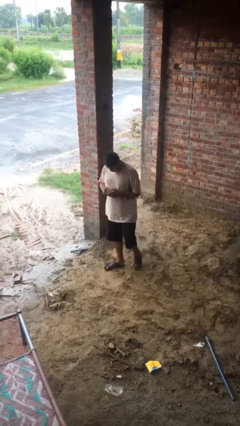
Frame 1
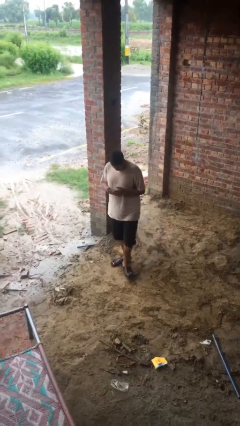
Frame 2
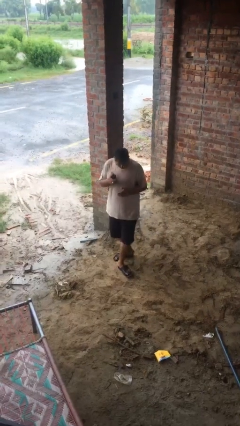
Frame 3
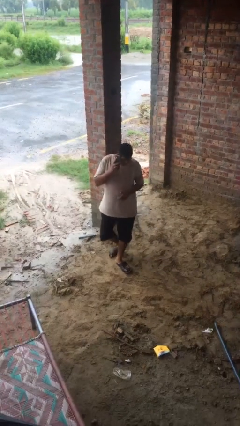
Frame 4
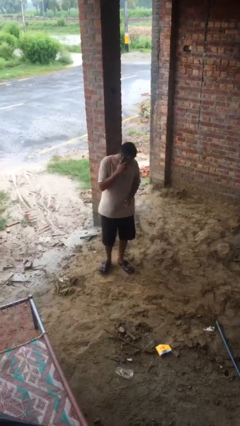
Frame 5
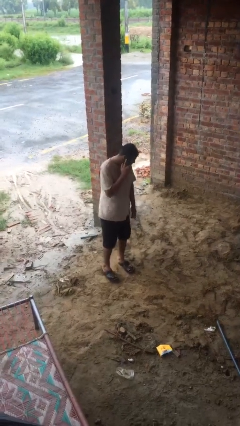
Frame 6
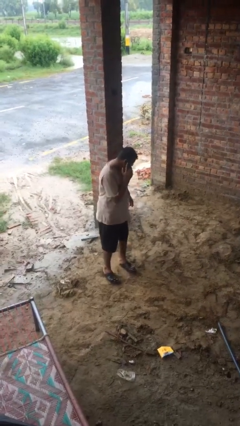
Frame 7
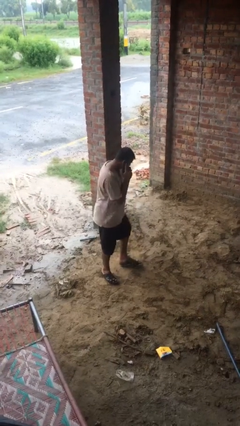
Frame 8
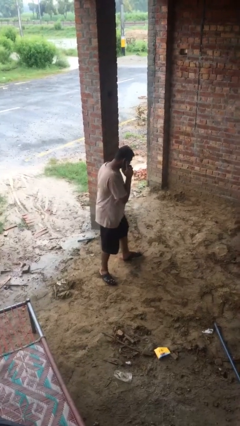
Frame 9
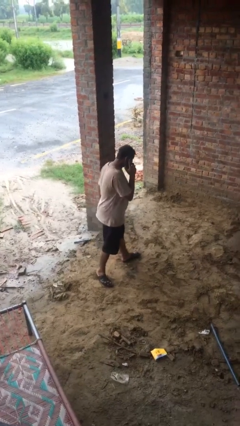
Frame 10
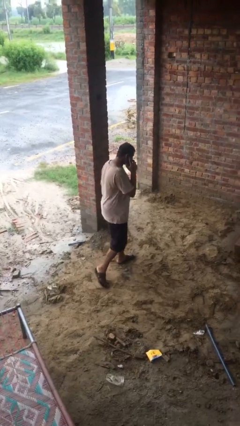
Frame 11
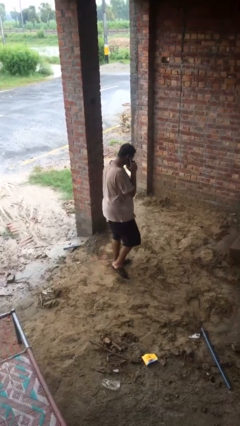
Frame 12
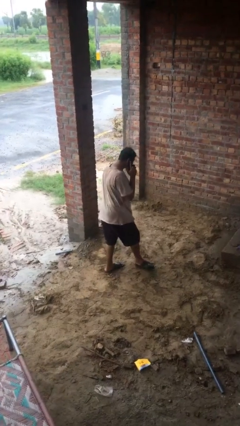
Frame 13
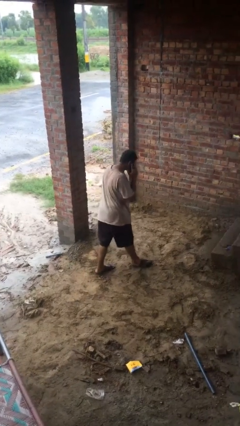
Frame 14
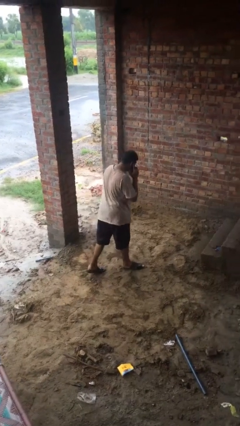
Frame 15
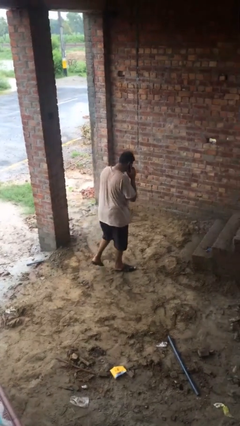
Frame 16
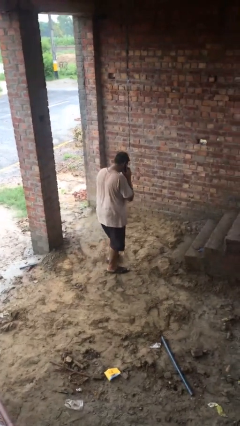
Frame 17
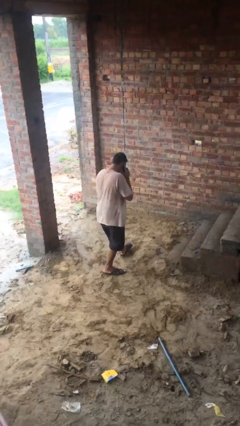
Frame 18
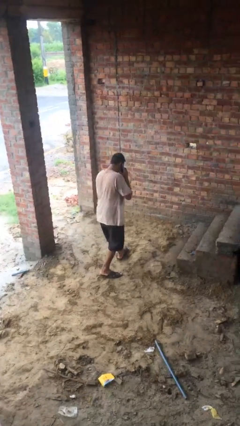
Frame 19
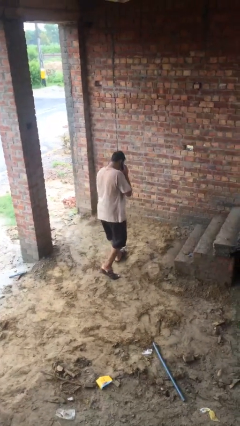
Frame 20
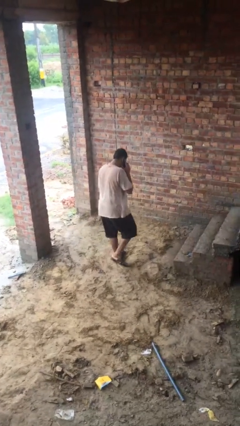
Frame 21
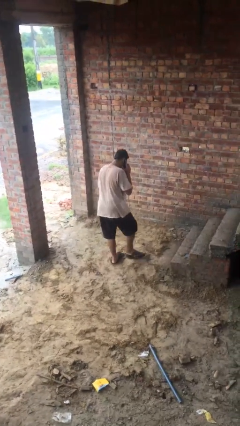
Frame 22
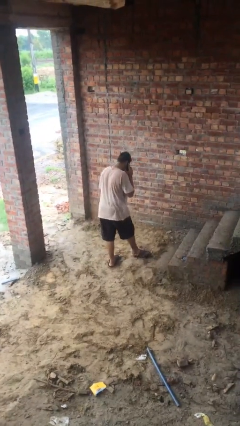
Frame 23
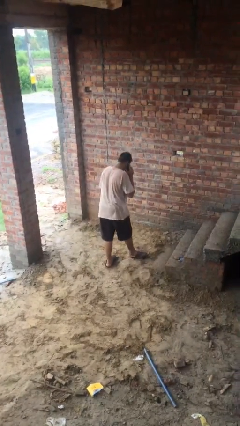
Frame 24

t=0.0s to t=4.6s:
person talks on phone

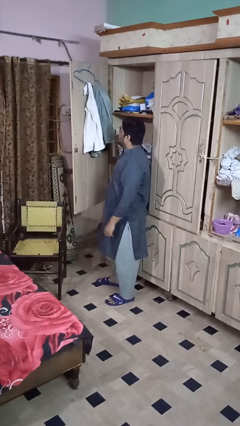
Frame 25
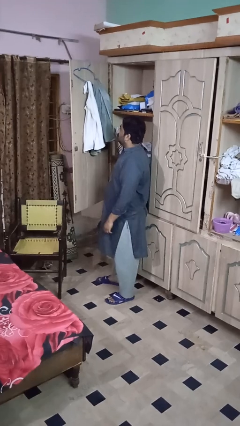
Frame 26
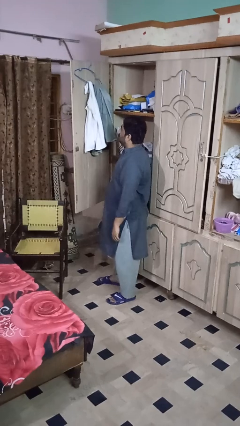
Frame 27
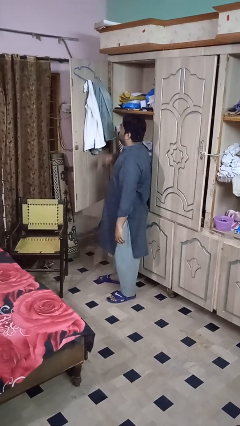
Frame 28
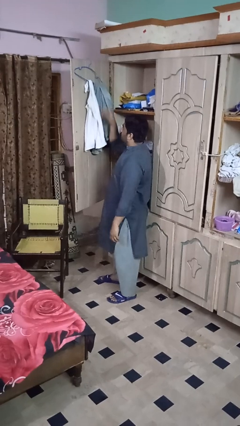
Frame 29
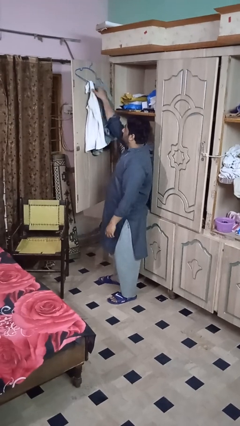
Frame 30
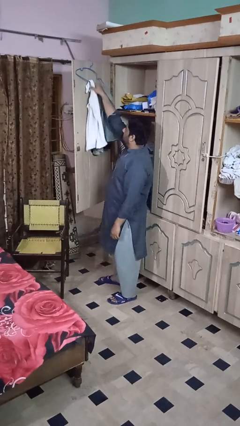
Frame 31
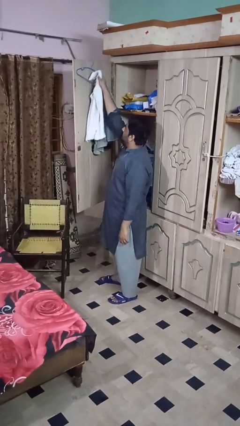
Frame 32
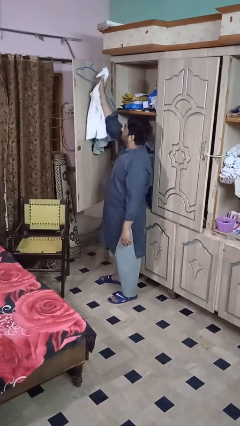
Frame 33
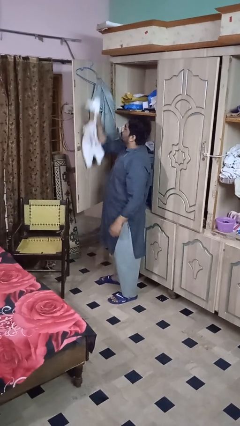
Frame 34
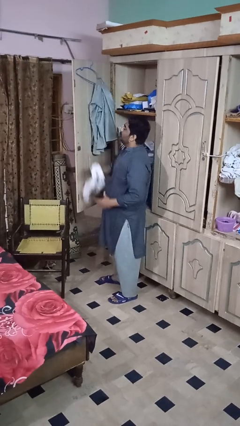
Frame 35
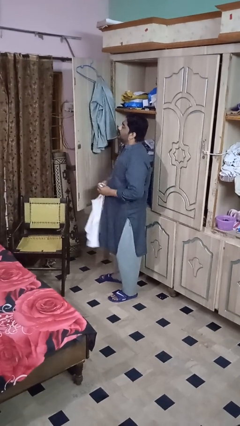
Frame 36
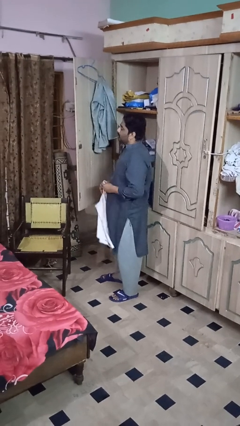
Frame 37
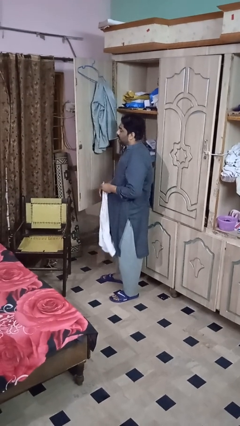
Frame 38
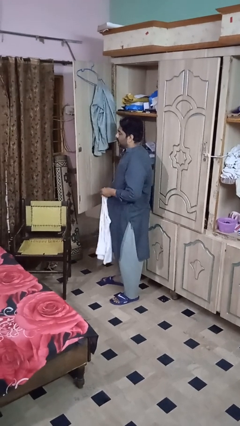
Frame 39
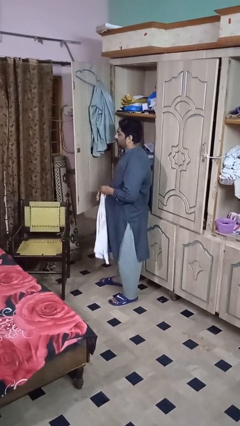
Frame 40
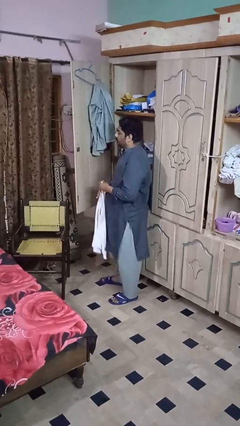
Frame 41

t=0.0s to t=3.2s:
person takes clothes from closet

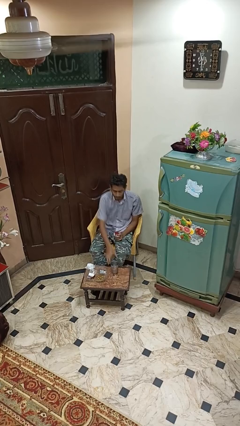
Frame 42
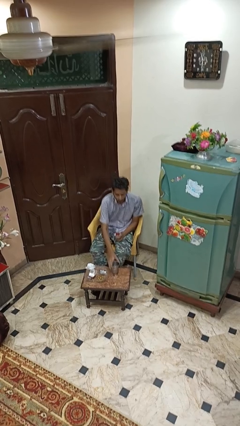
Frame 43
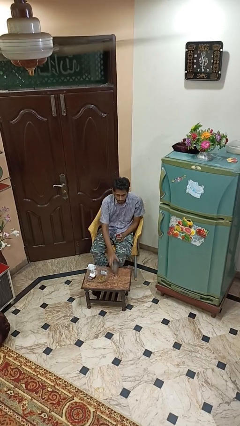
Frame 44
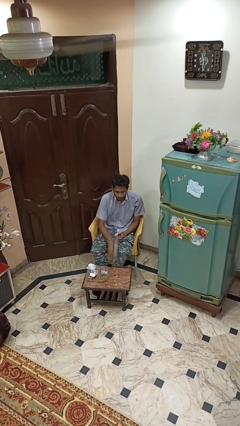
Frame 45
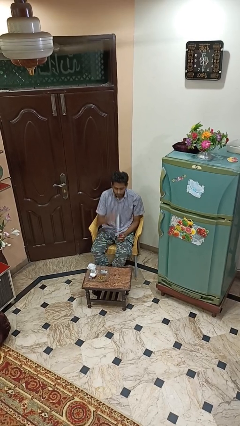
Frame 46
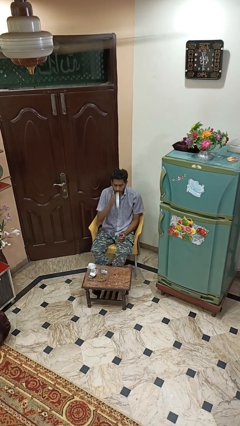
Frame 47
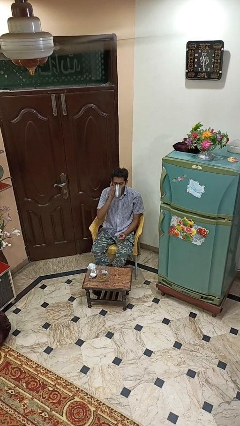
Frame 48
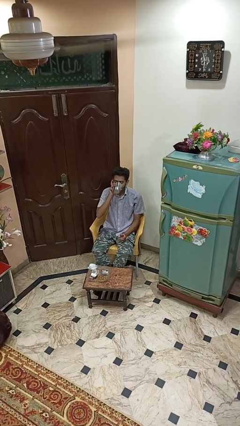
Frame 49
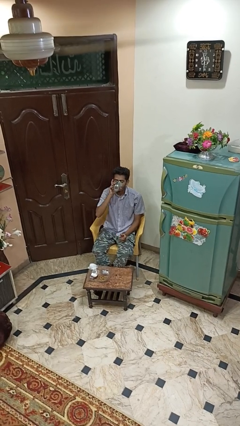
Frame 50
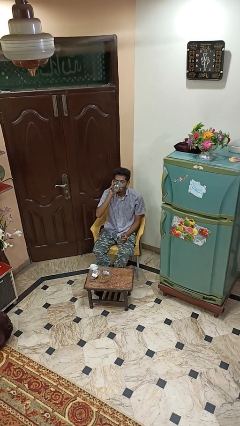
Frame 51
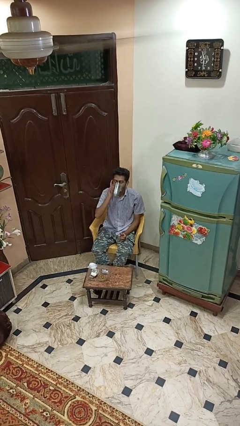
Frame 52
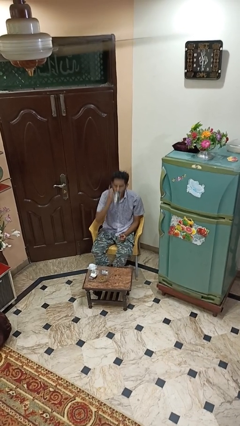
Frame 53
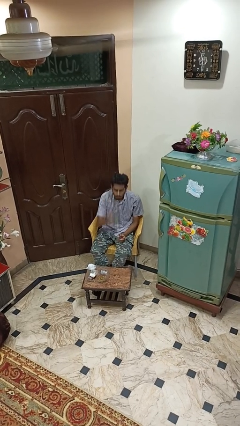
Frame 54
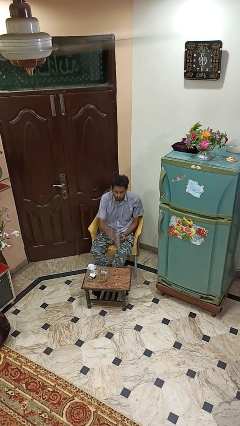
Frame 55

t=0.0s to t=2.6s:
person drinks from cup

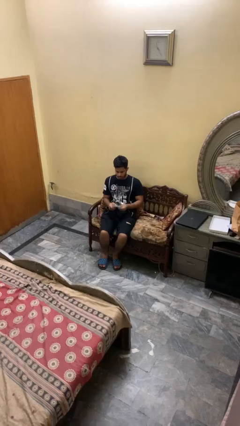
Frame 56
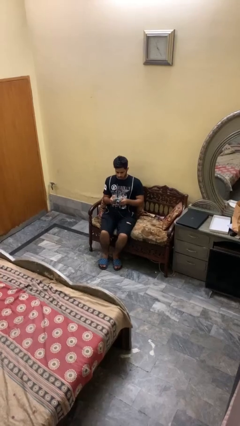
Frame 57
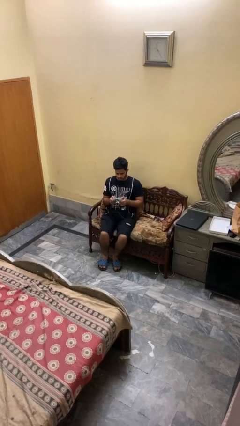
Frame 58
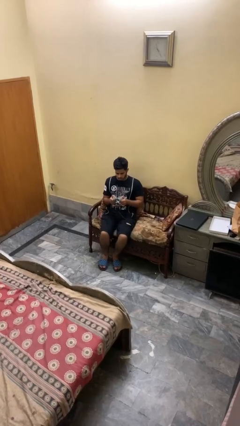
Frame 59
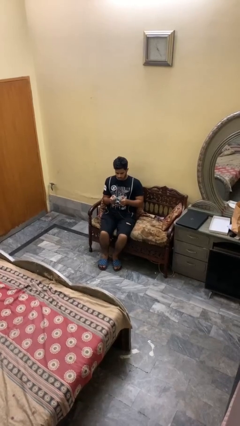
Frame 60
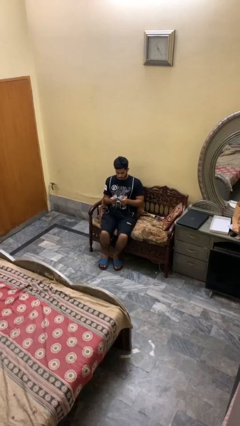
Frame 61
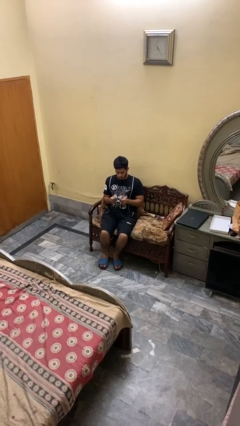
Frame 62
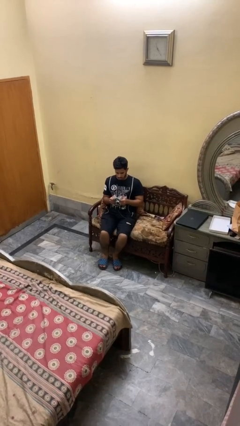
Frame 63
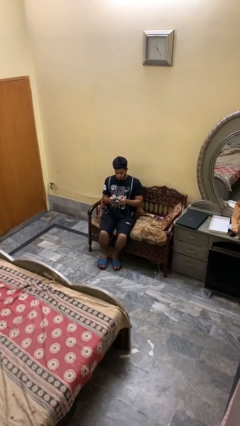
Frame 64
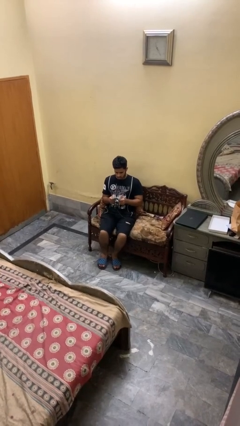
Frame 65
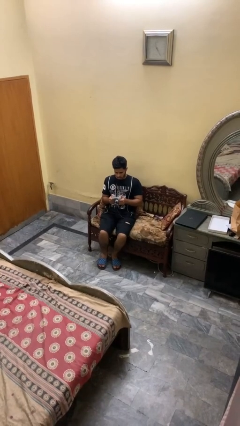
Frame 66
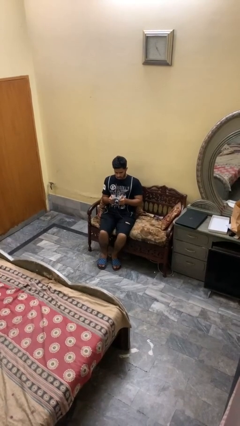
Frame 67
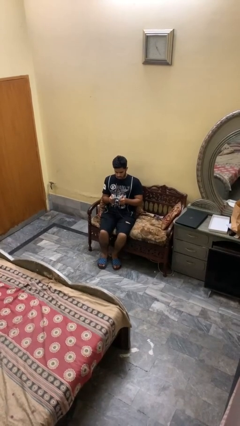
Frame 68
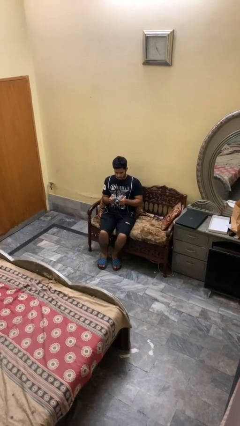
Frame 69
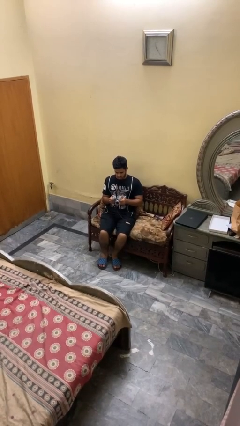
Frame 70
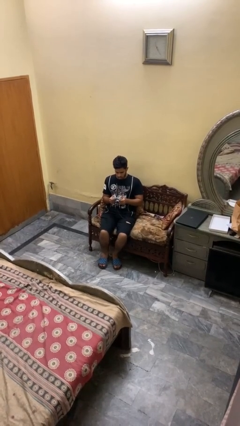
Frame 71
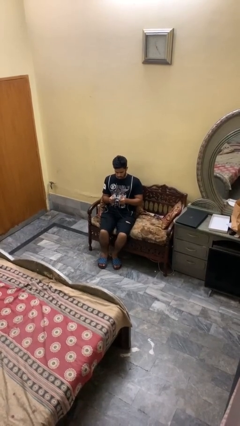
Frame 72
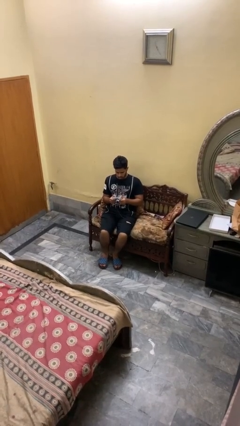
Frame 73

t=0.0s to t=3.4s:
person interacts with handheld game

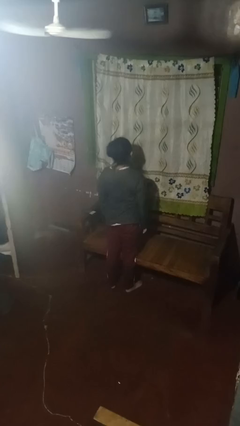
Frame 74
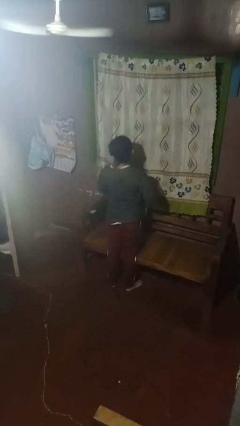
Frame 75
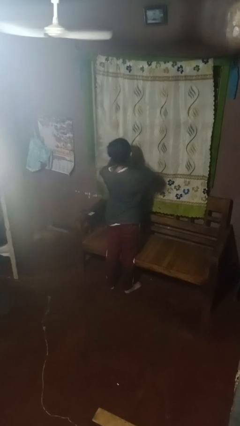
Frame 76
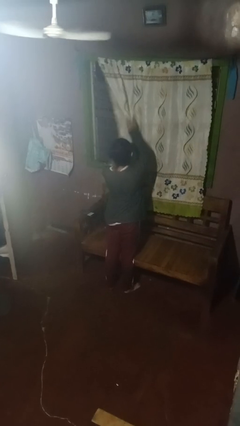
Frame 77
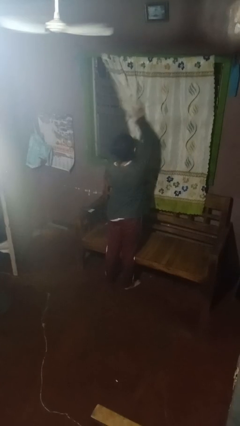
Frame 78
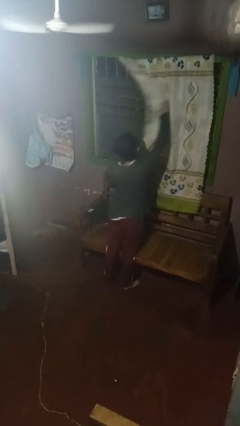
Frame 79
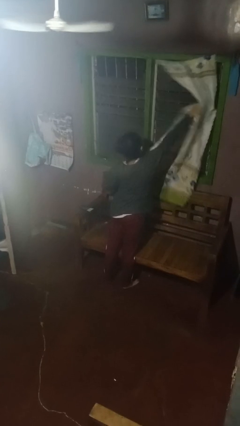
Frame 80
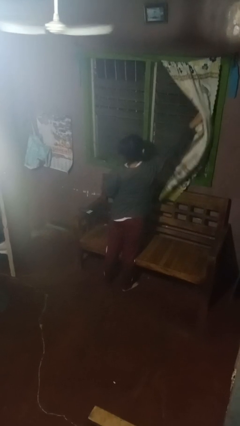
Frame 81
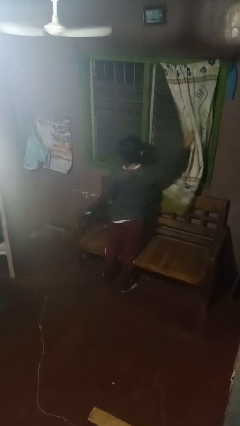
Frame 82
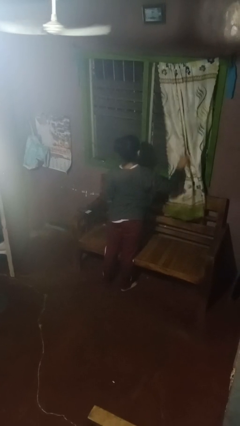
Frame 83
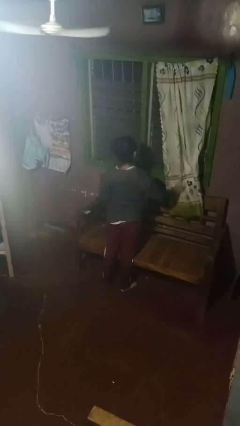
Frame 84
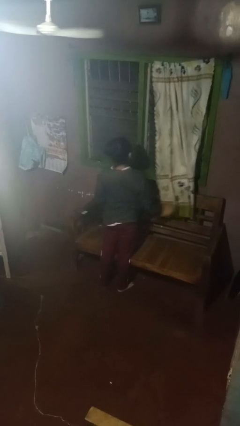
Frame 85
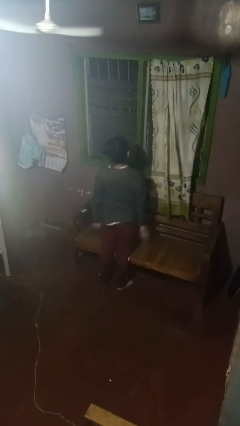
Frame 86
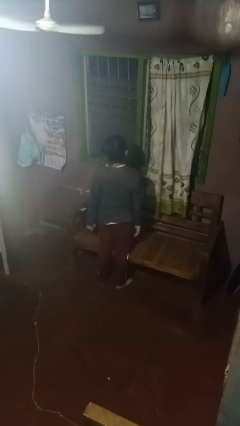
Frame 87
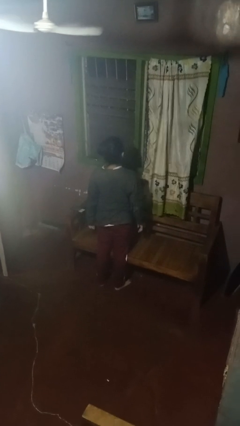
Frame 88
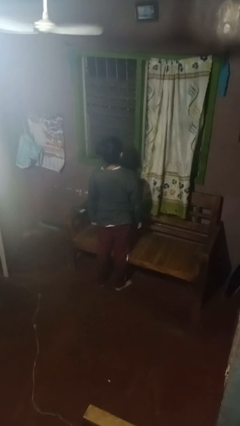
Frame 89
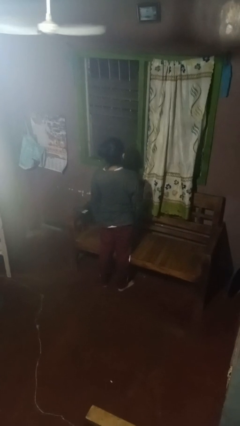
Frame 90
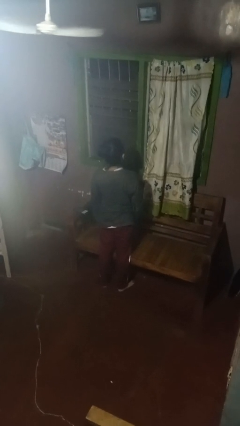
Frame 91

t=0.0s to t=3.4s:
person opens curtains

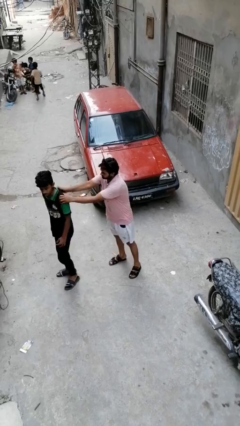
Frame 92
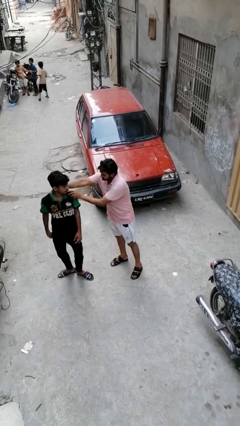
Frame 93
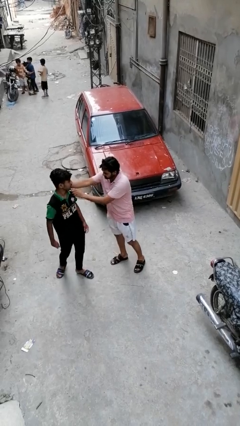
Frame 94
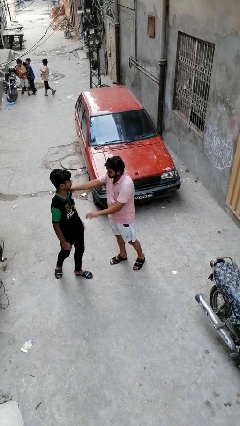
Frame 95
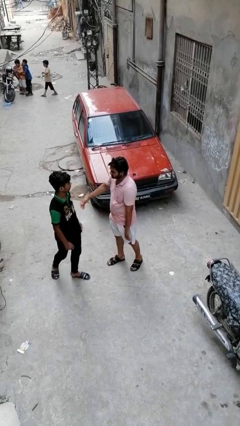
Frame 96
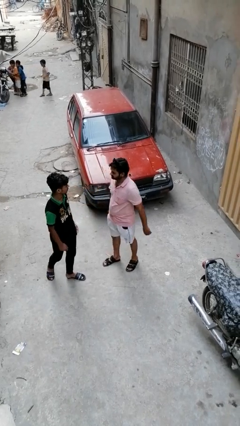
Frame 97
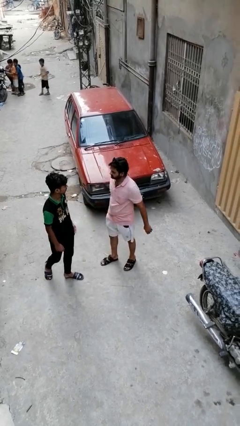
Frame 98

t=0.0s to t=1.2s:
person spins person around
